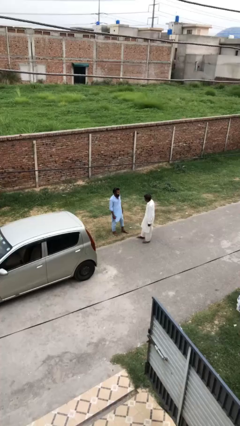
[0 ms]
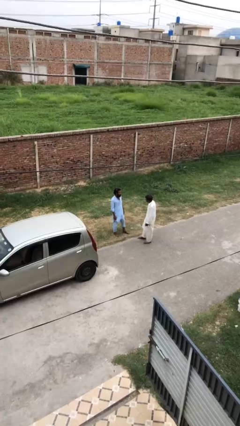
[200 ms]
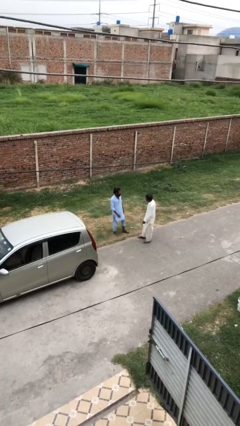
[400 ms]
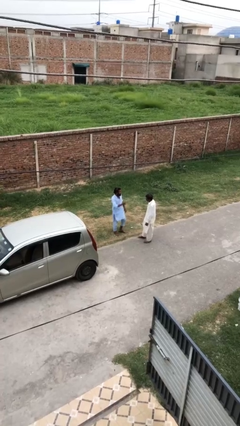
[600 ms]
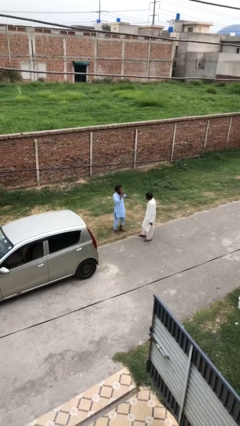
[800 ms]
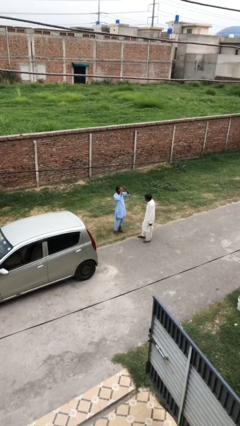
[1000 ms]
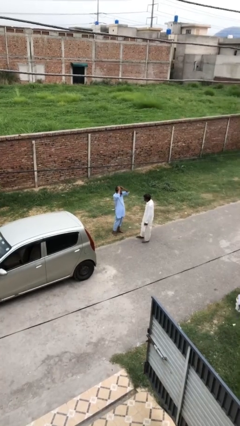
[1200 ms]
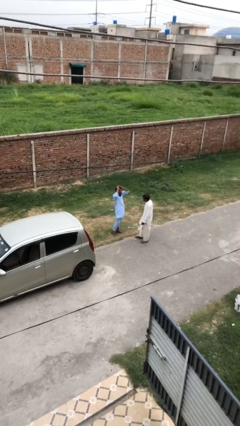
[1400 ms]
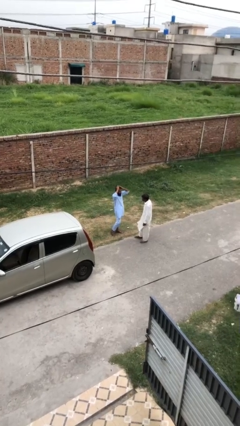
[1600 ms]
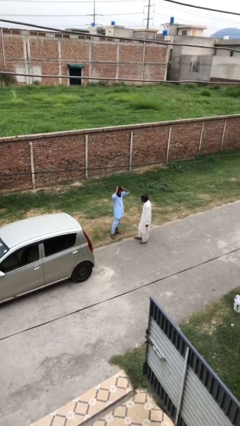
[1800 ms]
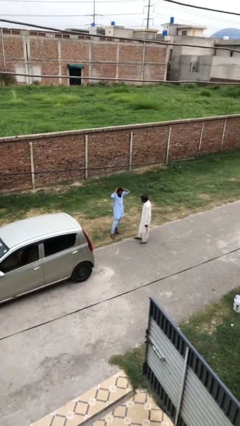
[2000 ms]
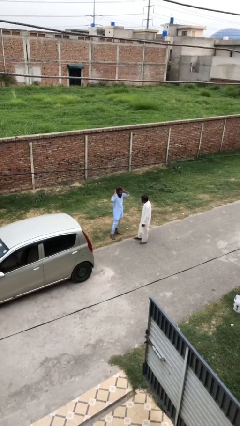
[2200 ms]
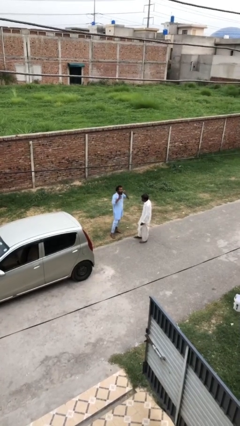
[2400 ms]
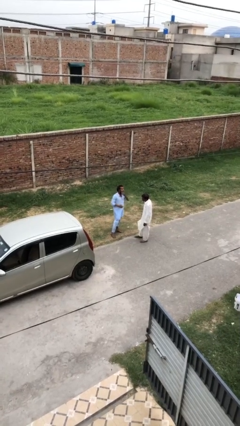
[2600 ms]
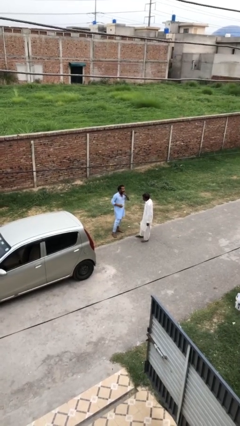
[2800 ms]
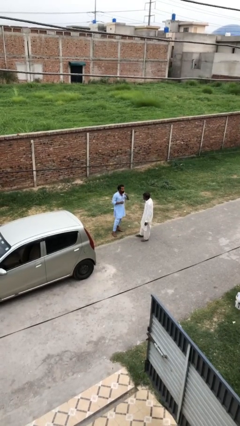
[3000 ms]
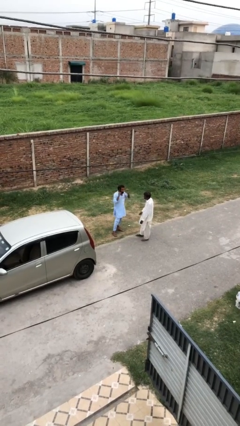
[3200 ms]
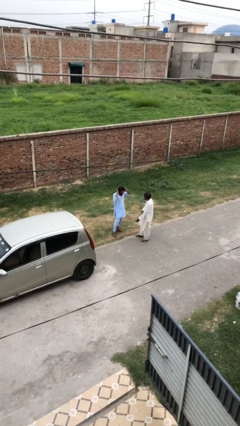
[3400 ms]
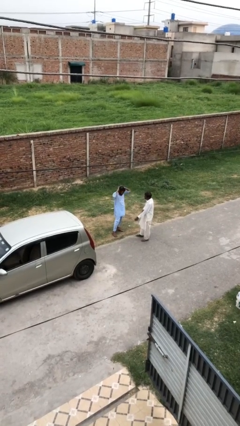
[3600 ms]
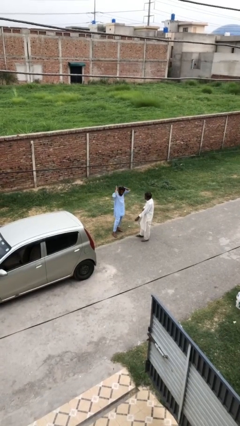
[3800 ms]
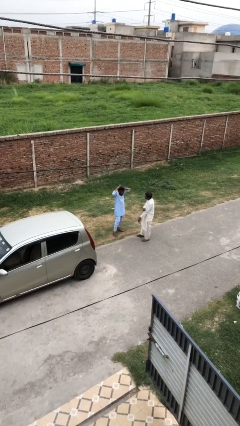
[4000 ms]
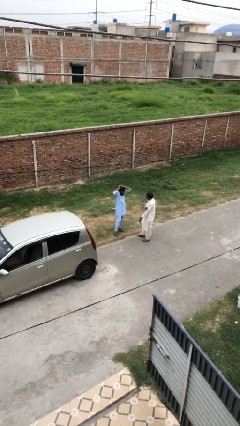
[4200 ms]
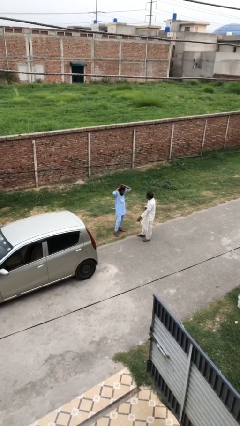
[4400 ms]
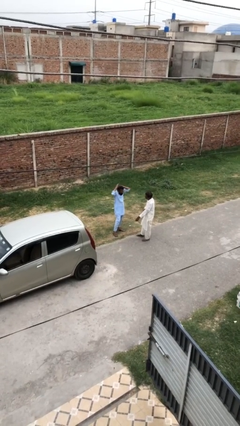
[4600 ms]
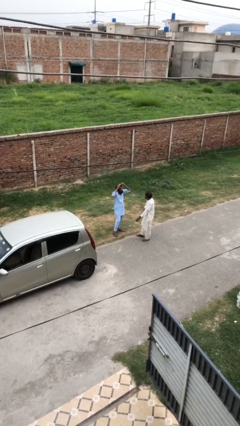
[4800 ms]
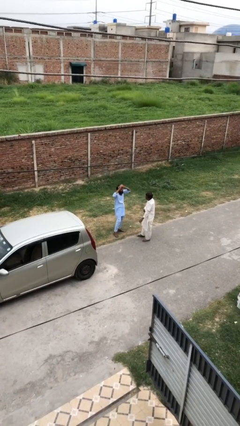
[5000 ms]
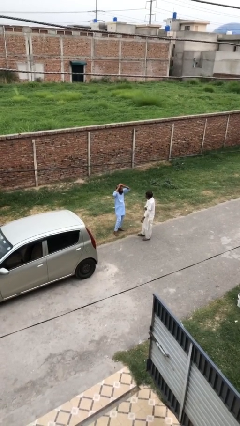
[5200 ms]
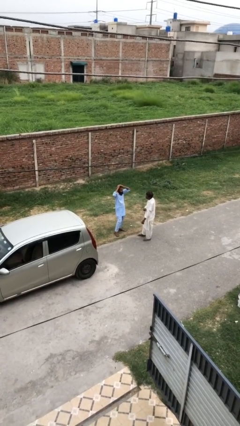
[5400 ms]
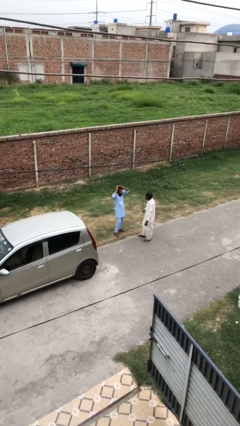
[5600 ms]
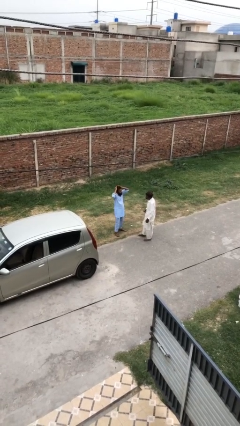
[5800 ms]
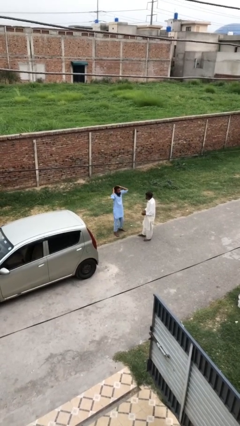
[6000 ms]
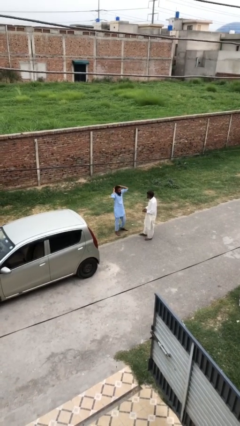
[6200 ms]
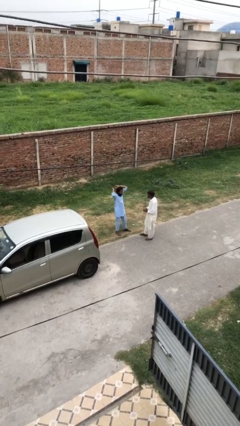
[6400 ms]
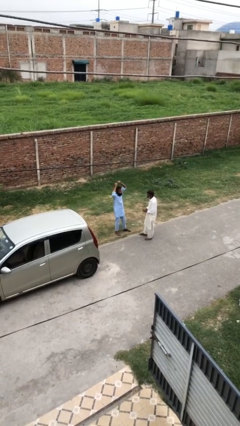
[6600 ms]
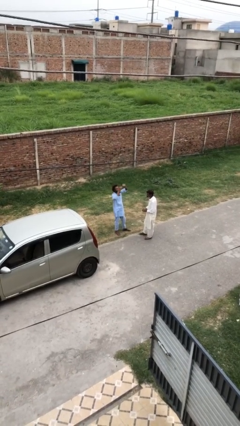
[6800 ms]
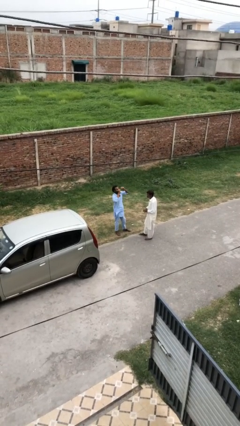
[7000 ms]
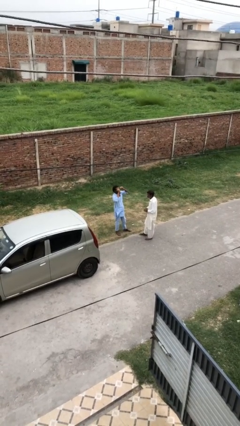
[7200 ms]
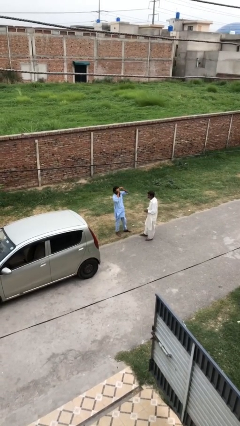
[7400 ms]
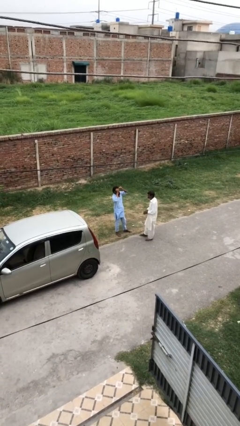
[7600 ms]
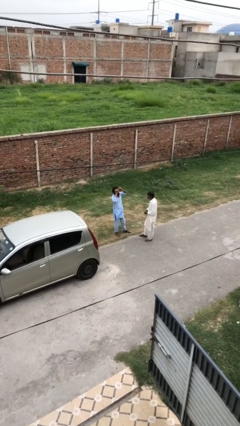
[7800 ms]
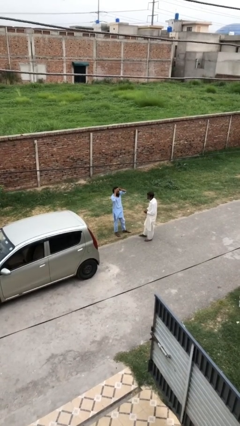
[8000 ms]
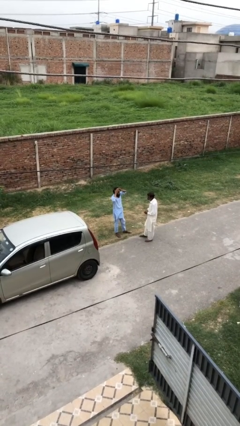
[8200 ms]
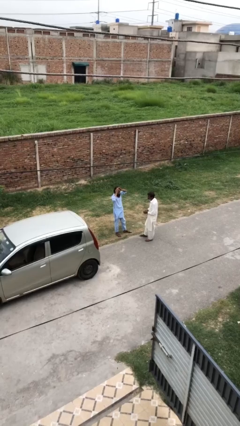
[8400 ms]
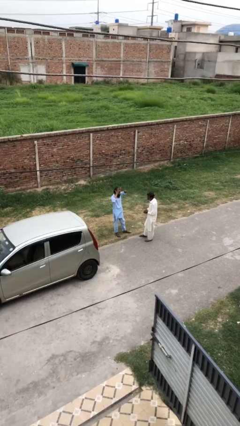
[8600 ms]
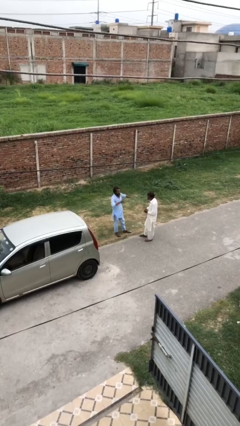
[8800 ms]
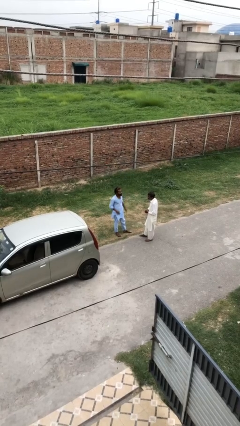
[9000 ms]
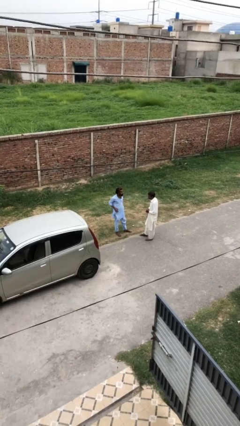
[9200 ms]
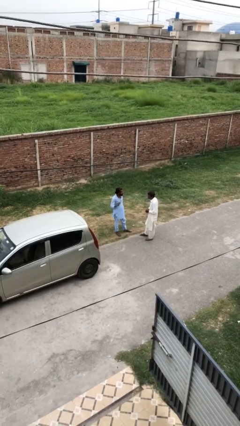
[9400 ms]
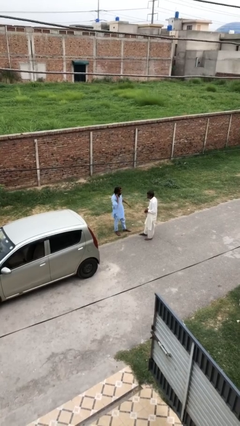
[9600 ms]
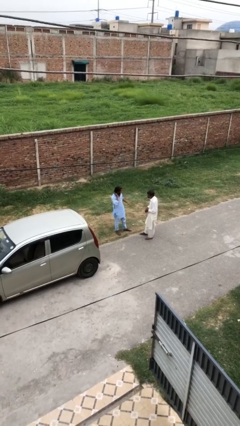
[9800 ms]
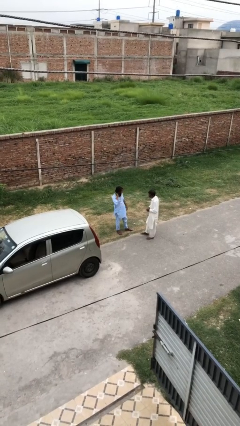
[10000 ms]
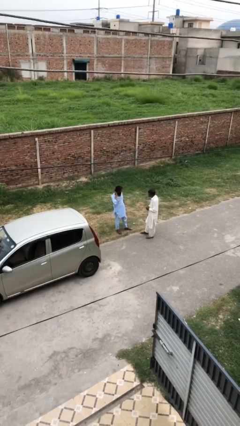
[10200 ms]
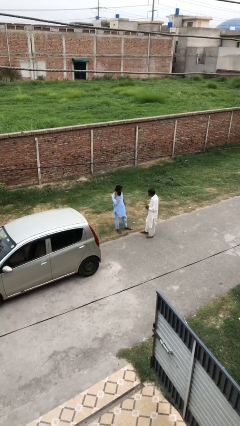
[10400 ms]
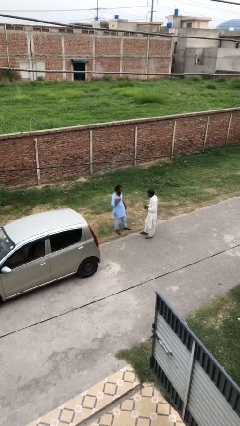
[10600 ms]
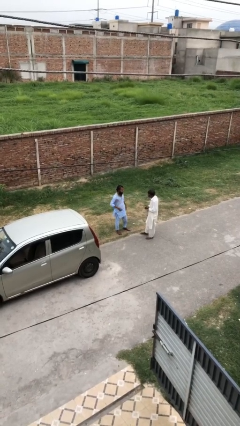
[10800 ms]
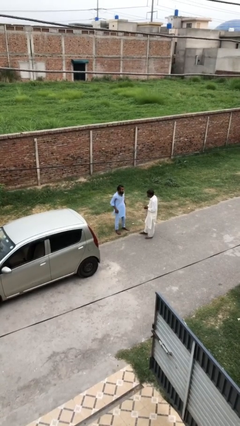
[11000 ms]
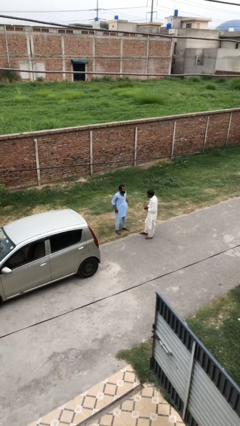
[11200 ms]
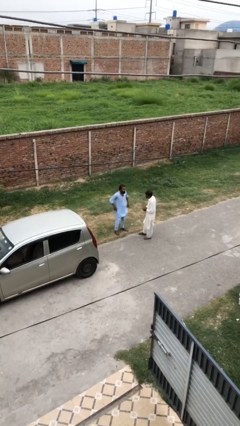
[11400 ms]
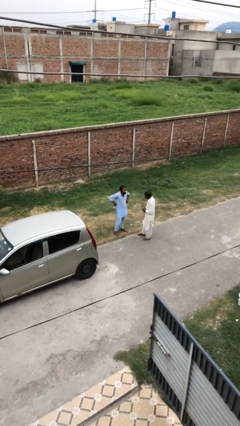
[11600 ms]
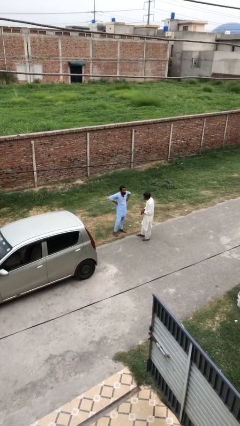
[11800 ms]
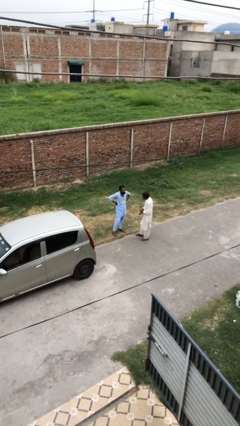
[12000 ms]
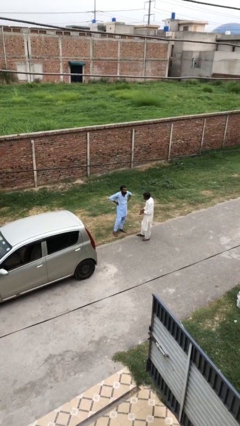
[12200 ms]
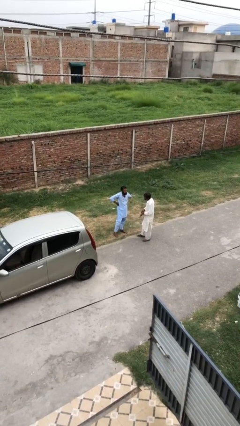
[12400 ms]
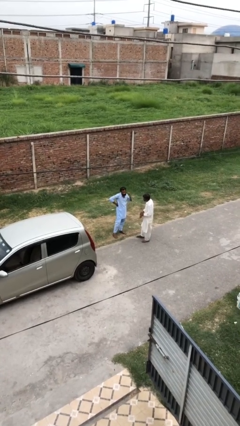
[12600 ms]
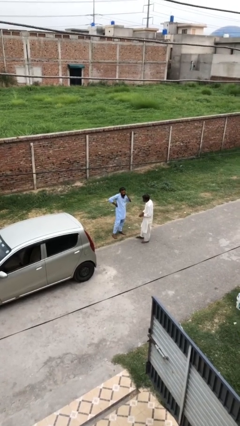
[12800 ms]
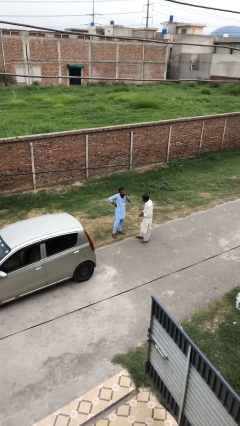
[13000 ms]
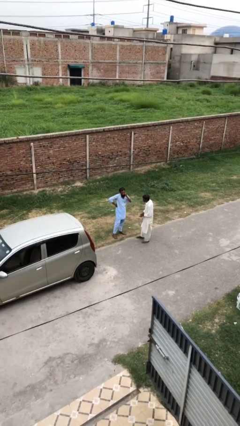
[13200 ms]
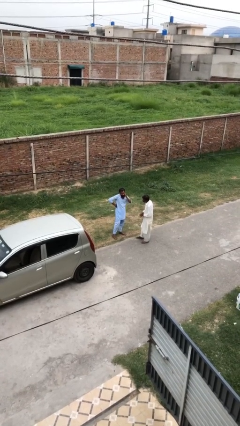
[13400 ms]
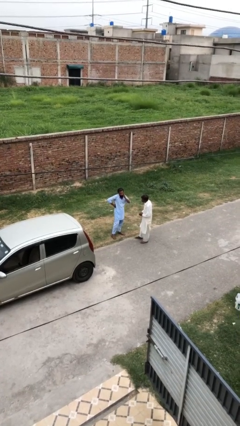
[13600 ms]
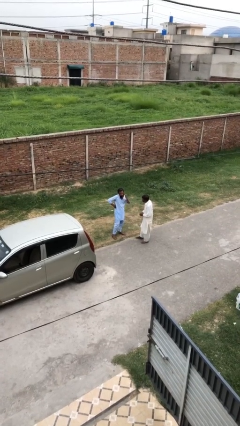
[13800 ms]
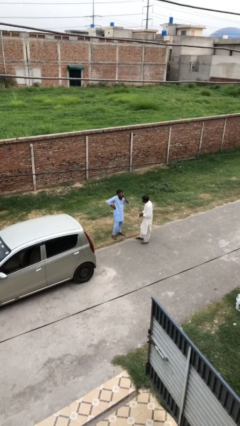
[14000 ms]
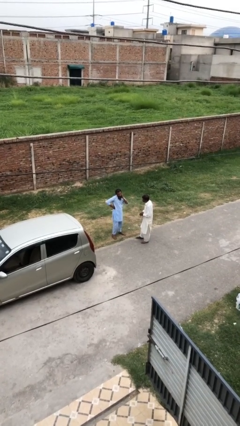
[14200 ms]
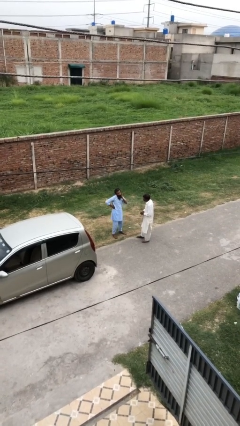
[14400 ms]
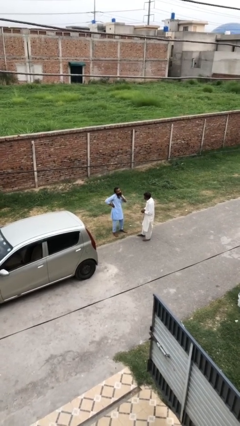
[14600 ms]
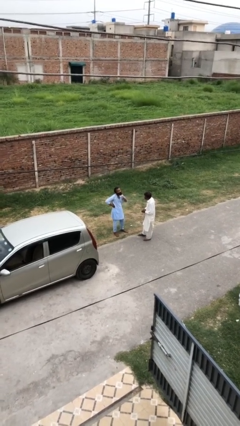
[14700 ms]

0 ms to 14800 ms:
person talks to person

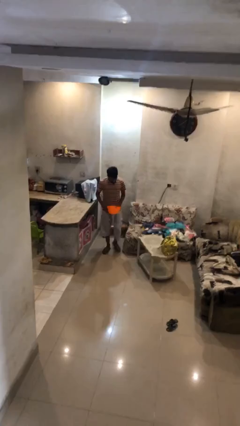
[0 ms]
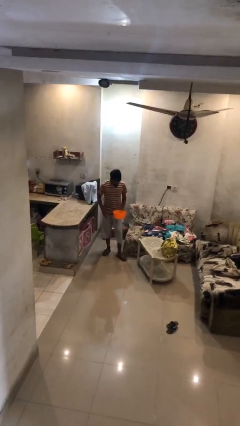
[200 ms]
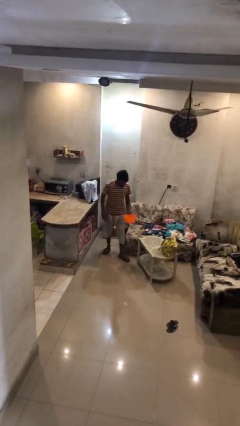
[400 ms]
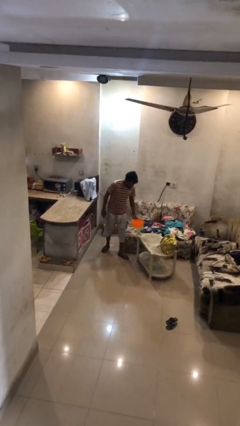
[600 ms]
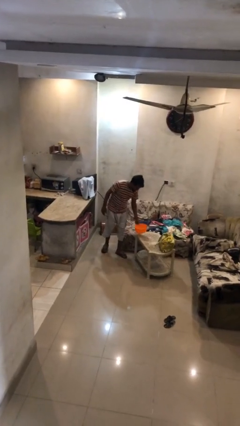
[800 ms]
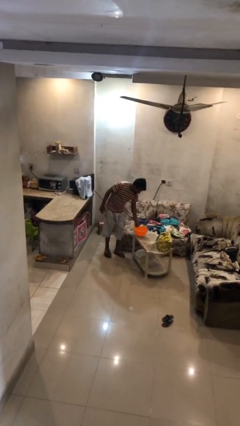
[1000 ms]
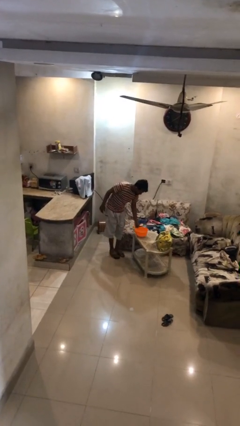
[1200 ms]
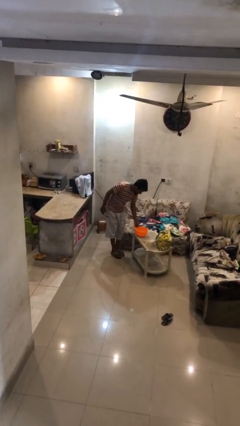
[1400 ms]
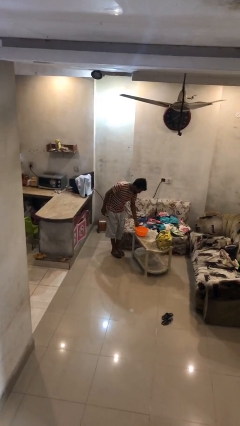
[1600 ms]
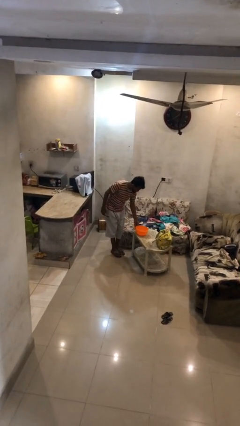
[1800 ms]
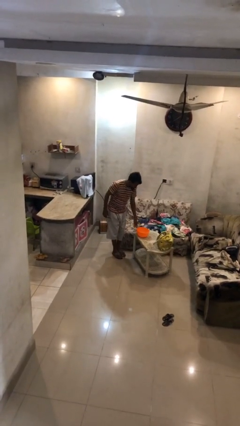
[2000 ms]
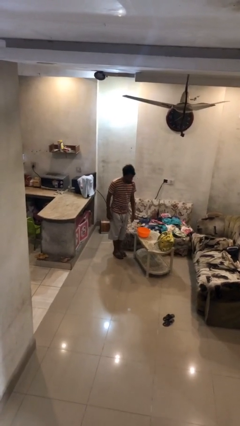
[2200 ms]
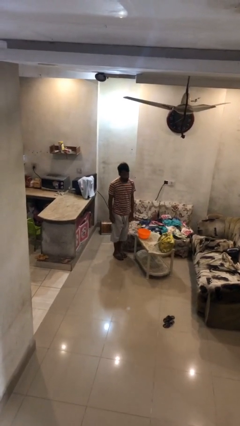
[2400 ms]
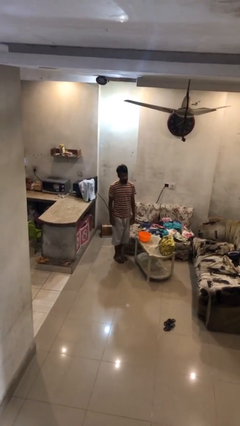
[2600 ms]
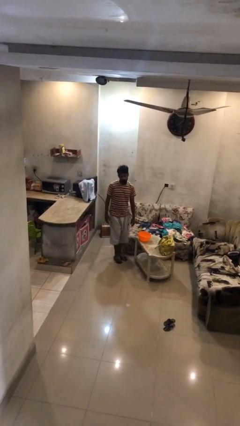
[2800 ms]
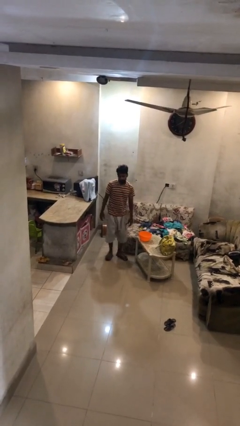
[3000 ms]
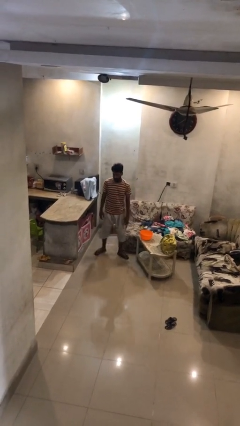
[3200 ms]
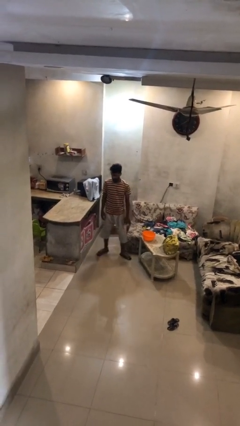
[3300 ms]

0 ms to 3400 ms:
person puts down object on table
